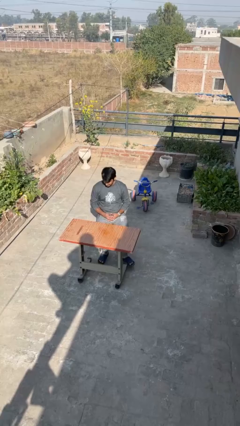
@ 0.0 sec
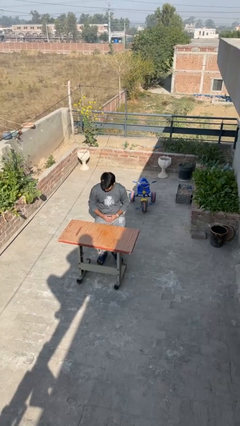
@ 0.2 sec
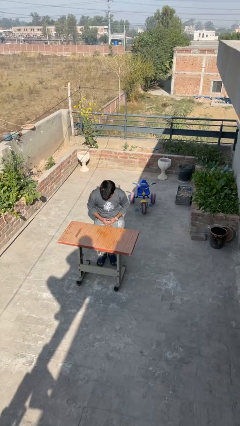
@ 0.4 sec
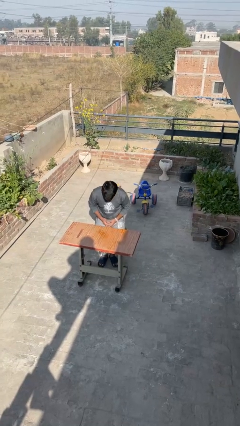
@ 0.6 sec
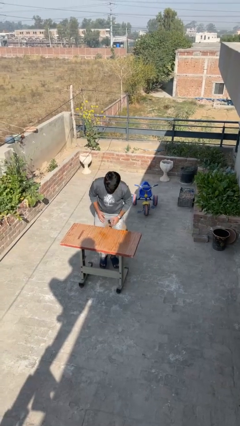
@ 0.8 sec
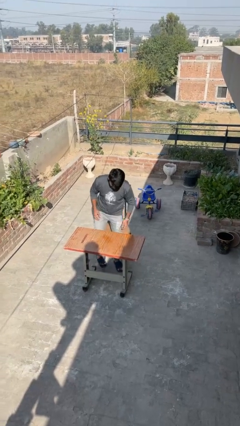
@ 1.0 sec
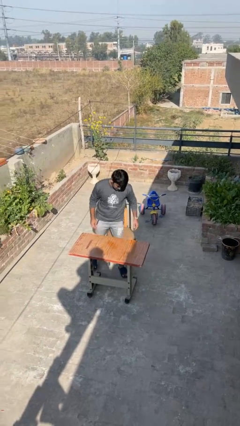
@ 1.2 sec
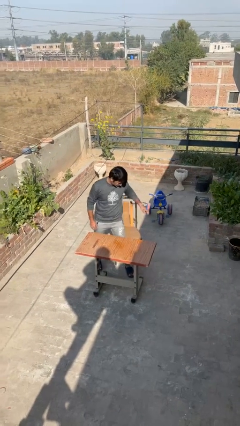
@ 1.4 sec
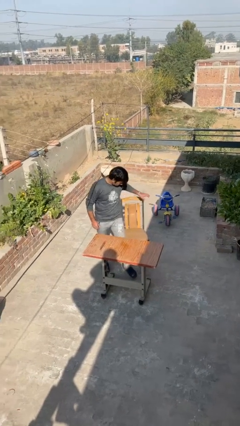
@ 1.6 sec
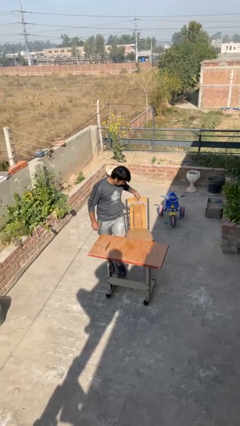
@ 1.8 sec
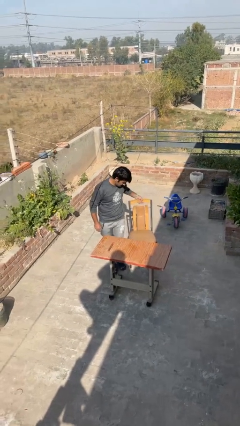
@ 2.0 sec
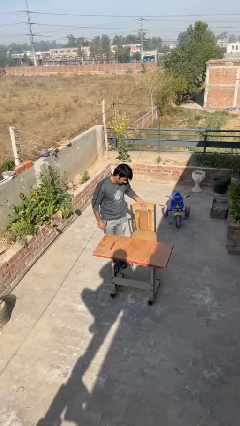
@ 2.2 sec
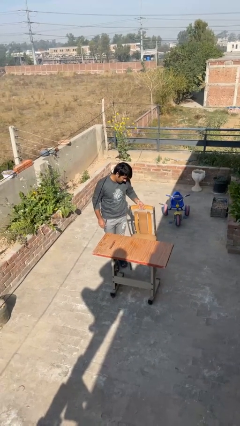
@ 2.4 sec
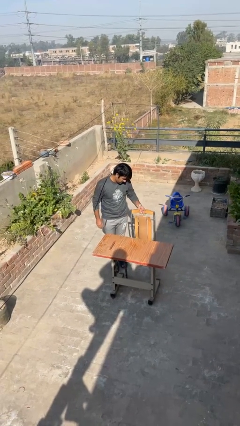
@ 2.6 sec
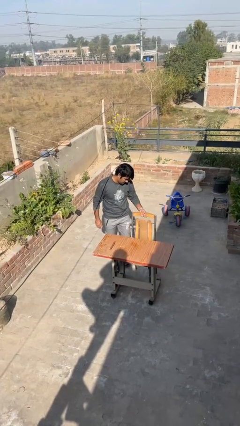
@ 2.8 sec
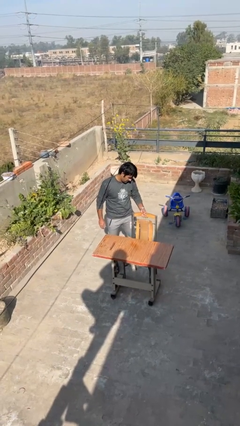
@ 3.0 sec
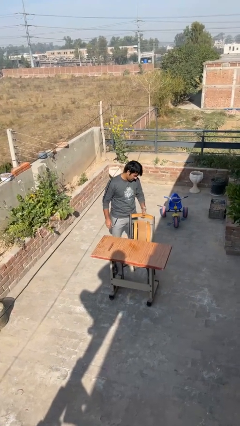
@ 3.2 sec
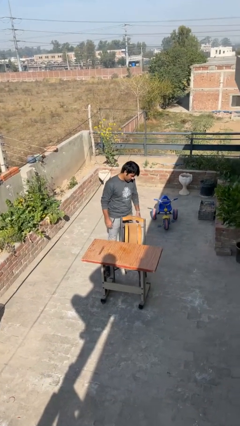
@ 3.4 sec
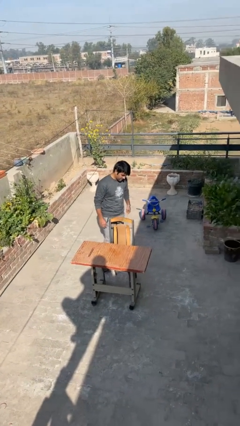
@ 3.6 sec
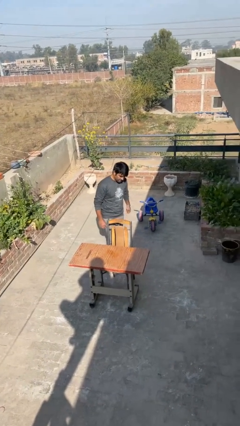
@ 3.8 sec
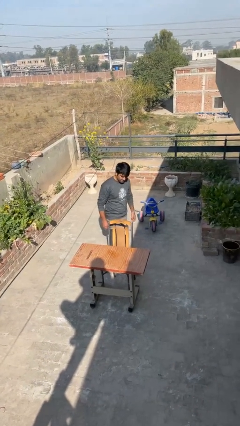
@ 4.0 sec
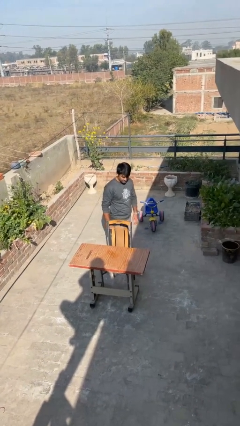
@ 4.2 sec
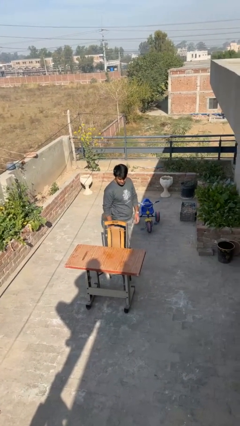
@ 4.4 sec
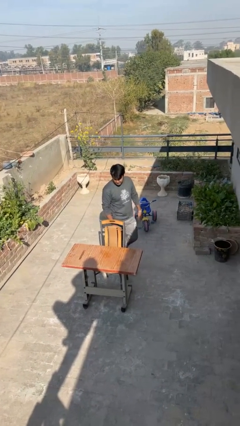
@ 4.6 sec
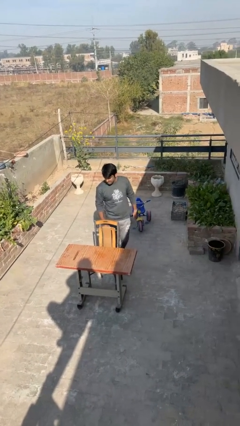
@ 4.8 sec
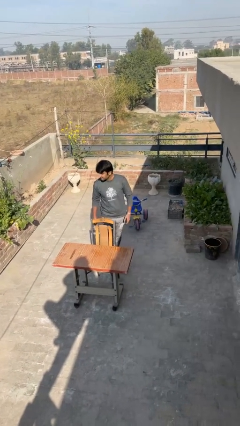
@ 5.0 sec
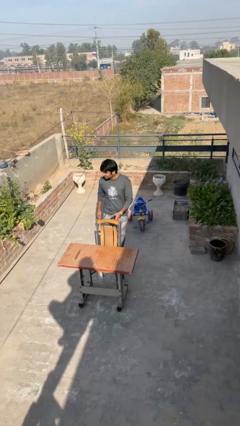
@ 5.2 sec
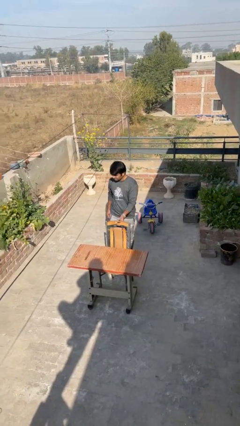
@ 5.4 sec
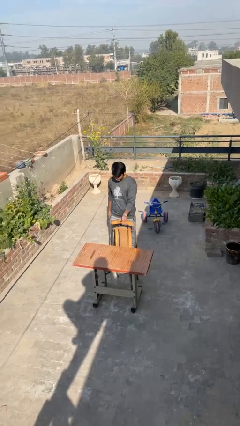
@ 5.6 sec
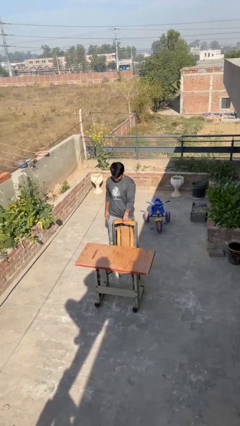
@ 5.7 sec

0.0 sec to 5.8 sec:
person stands up

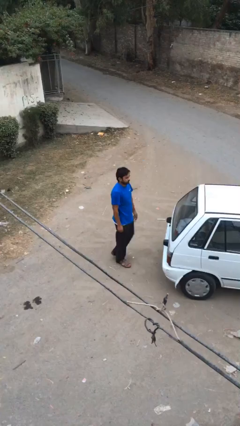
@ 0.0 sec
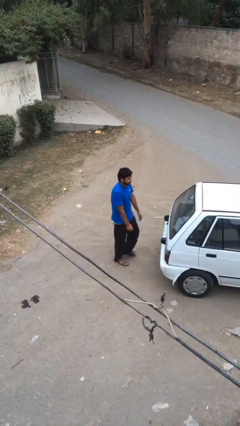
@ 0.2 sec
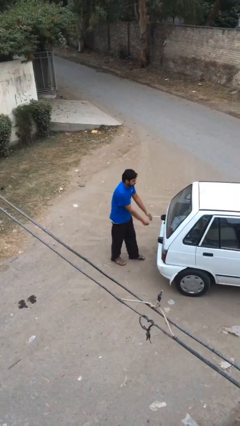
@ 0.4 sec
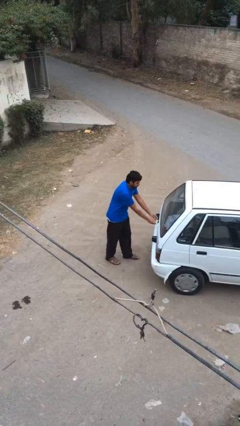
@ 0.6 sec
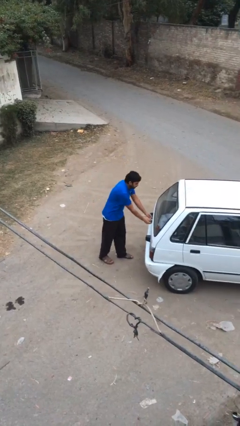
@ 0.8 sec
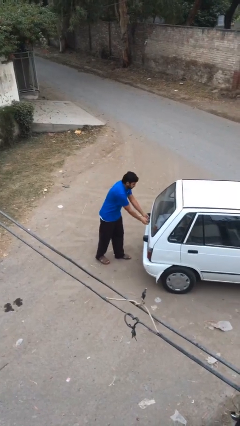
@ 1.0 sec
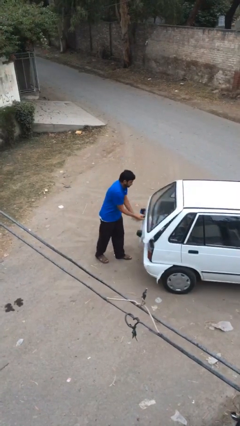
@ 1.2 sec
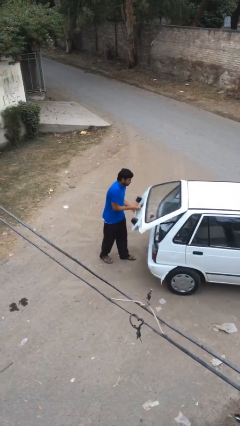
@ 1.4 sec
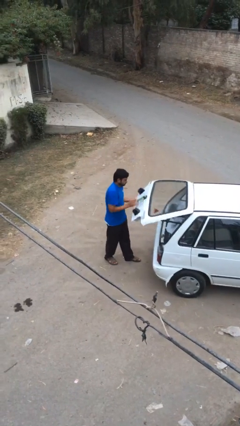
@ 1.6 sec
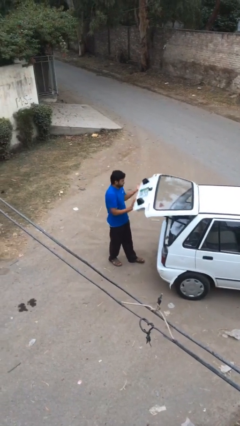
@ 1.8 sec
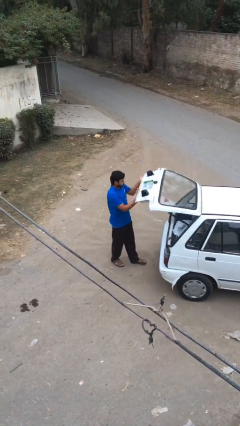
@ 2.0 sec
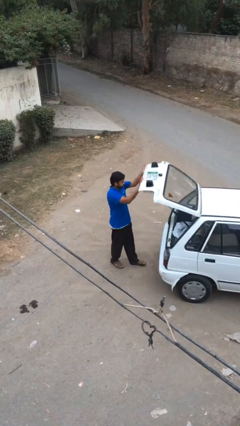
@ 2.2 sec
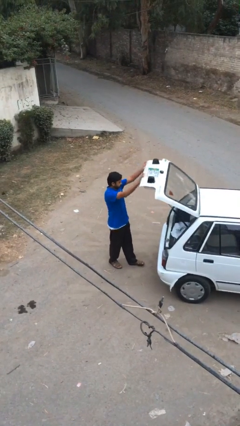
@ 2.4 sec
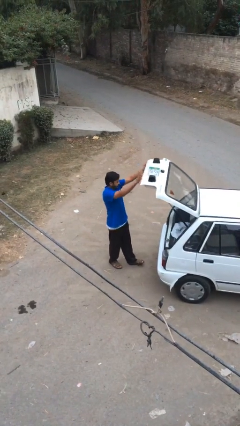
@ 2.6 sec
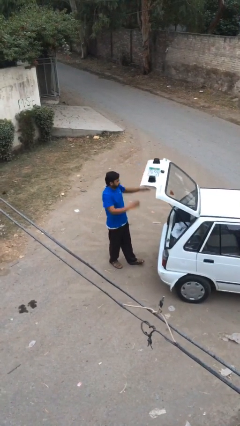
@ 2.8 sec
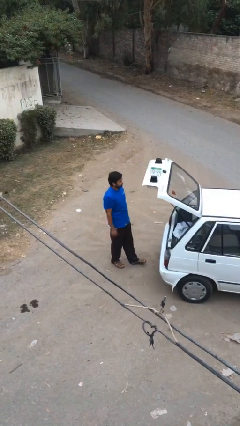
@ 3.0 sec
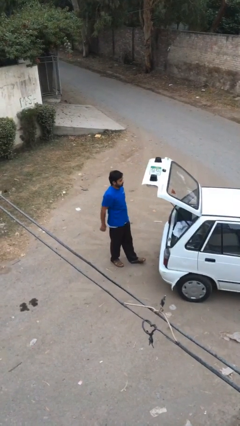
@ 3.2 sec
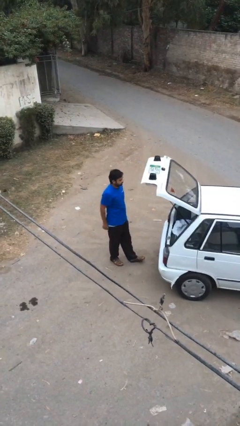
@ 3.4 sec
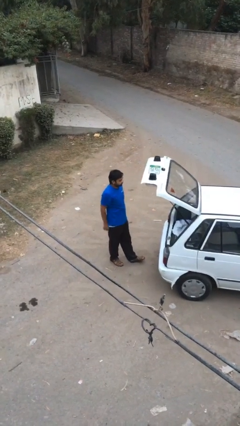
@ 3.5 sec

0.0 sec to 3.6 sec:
person opens car trunk

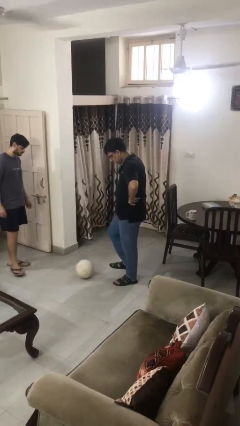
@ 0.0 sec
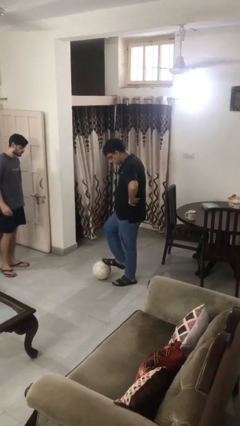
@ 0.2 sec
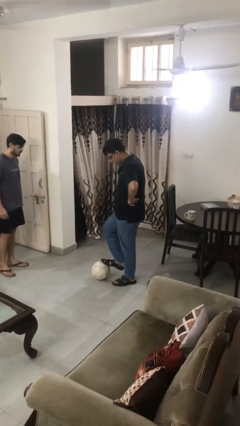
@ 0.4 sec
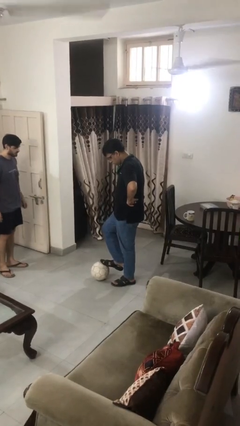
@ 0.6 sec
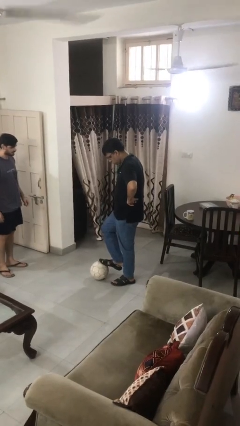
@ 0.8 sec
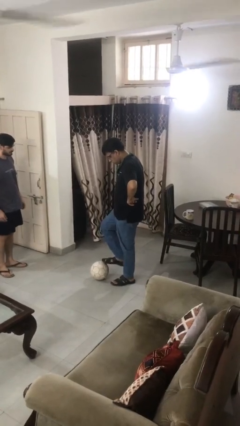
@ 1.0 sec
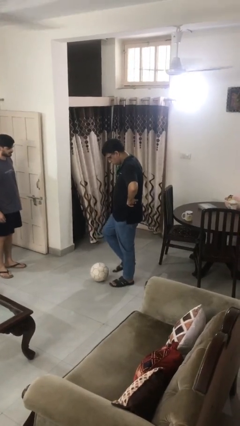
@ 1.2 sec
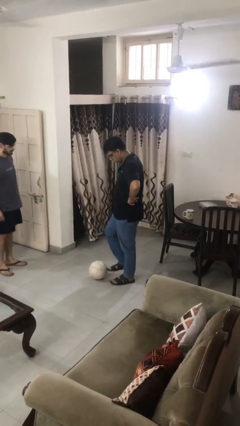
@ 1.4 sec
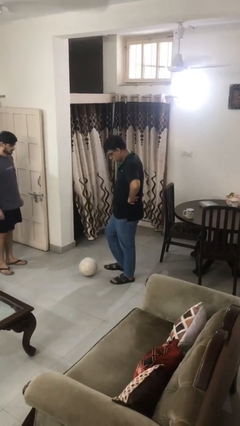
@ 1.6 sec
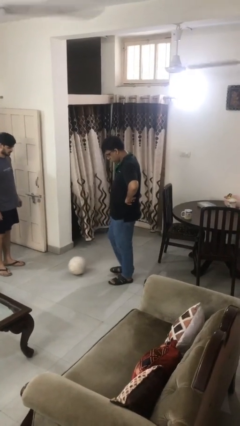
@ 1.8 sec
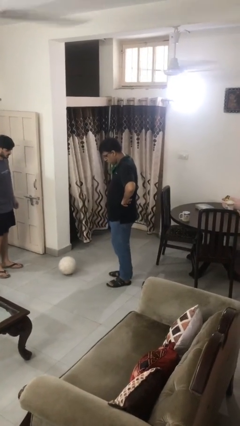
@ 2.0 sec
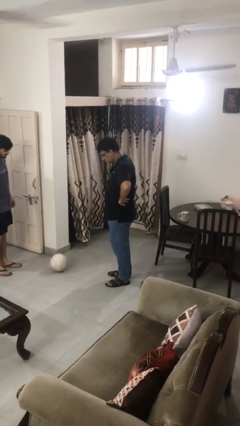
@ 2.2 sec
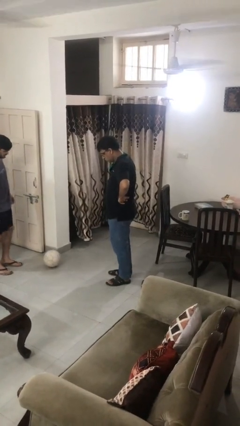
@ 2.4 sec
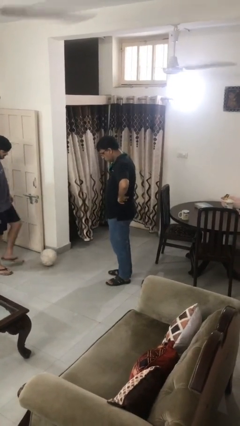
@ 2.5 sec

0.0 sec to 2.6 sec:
person kicks object to person

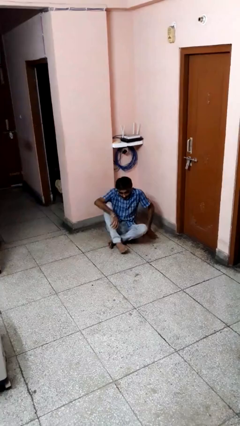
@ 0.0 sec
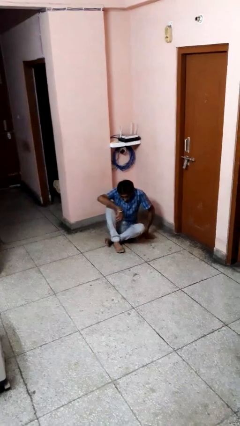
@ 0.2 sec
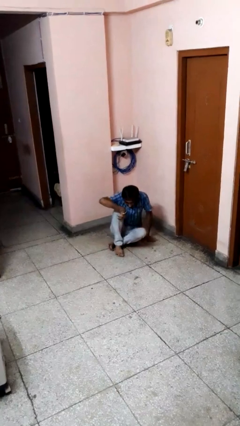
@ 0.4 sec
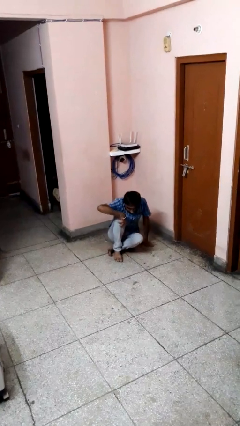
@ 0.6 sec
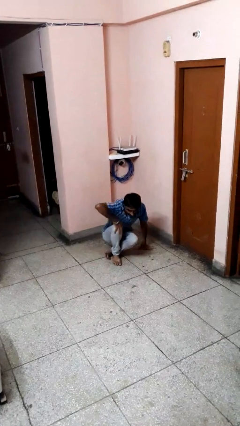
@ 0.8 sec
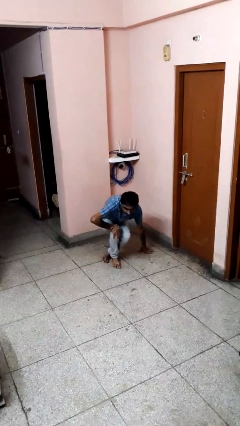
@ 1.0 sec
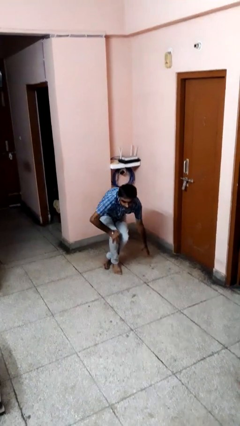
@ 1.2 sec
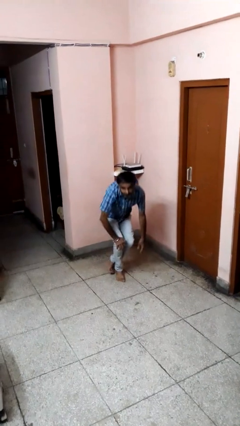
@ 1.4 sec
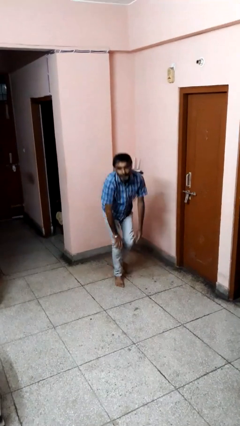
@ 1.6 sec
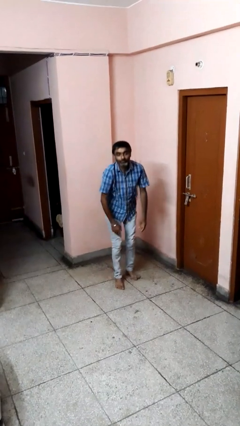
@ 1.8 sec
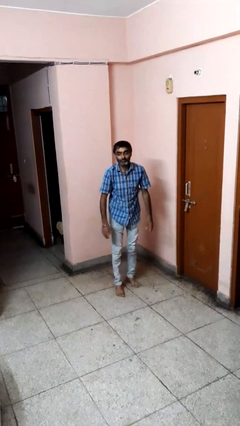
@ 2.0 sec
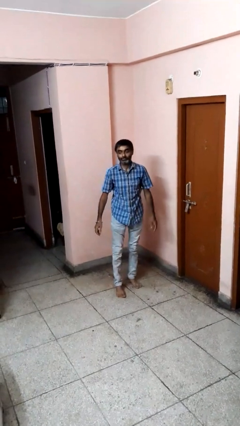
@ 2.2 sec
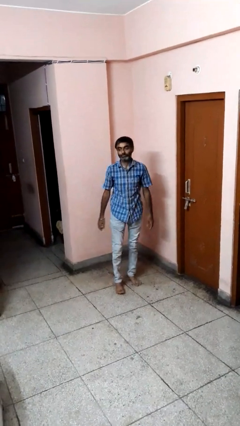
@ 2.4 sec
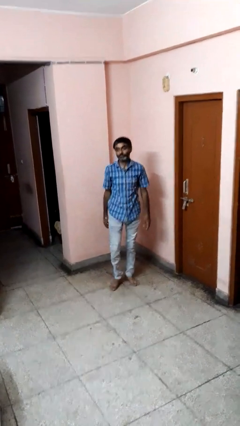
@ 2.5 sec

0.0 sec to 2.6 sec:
person stands up from floor

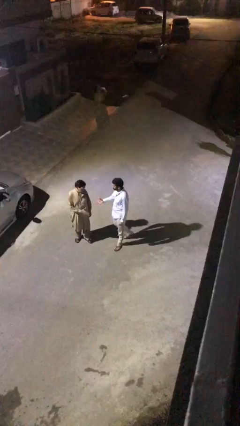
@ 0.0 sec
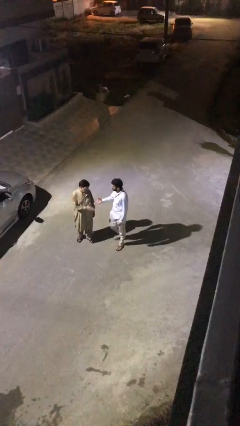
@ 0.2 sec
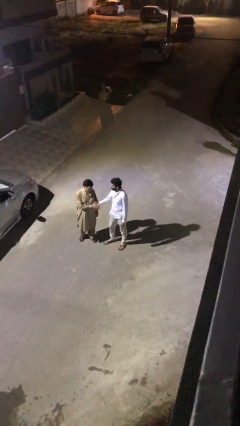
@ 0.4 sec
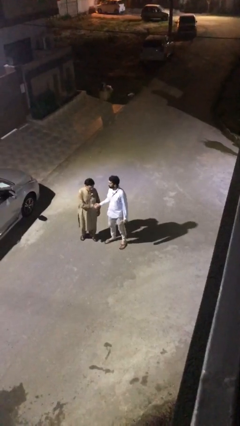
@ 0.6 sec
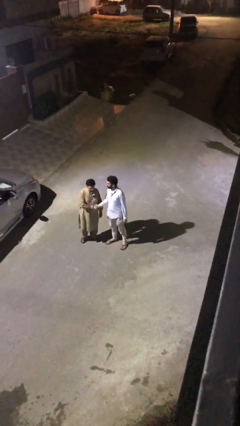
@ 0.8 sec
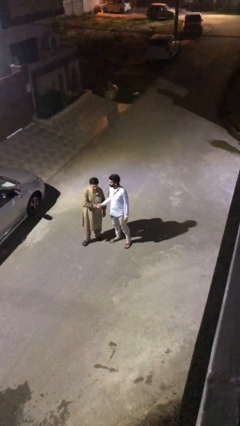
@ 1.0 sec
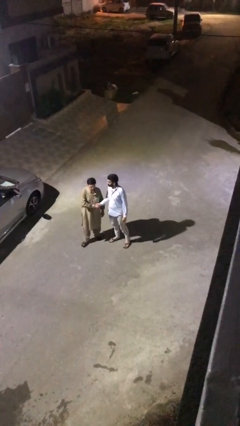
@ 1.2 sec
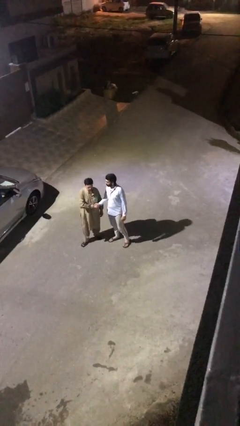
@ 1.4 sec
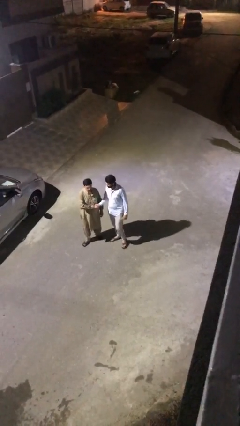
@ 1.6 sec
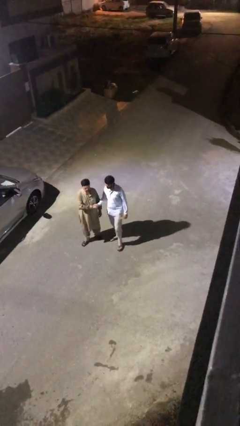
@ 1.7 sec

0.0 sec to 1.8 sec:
person shakes hand

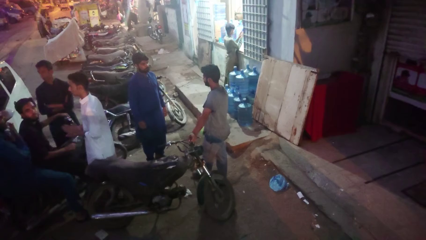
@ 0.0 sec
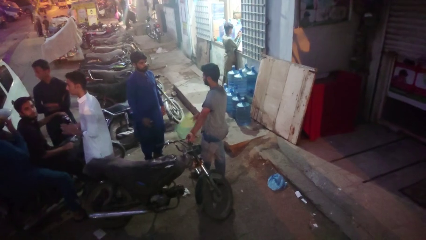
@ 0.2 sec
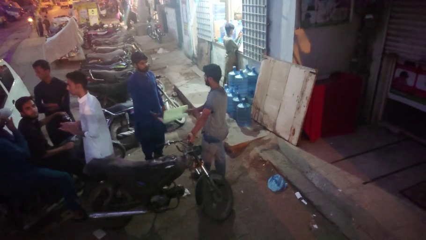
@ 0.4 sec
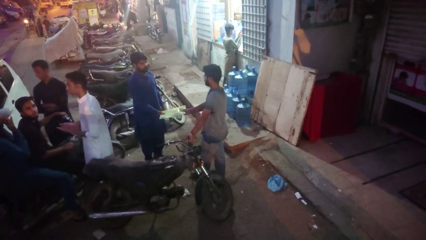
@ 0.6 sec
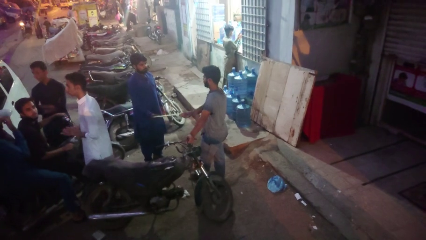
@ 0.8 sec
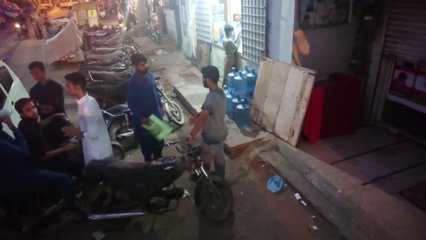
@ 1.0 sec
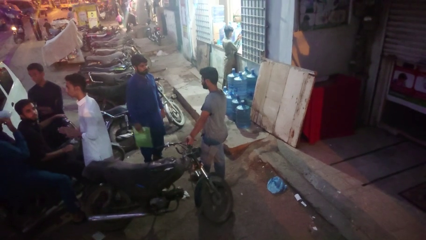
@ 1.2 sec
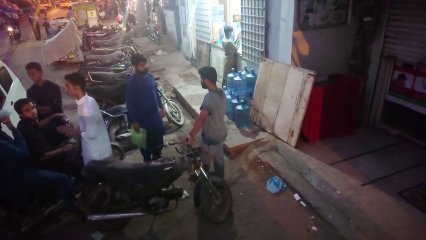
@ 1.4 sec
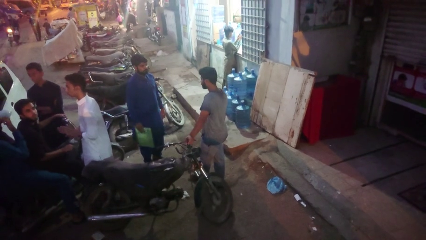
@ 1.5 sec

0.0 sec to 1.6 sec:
person transfers object to person
